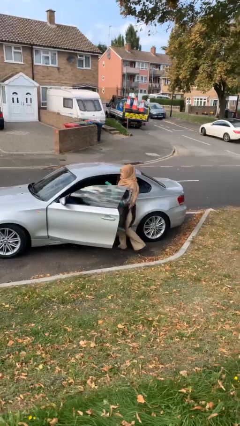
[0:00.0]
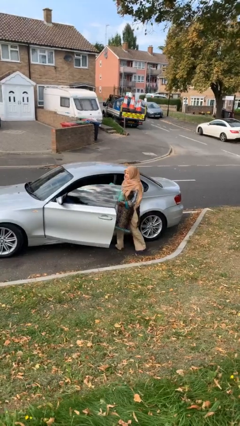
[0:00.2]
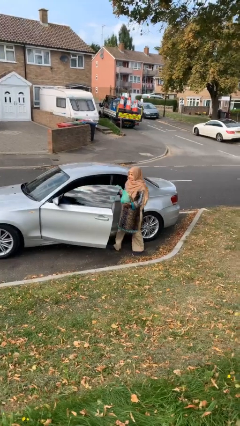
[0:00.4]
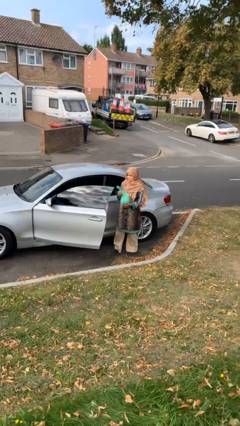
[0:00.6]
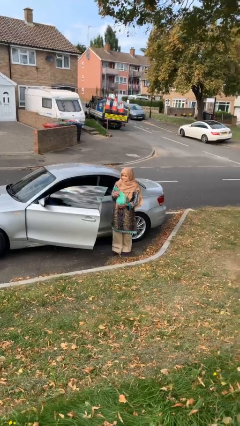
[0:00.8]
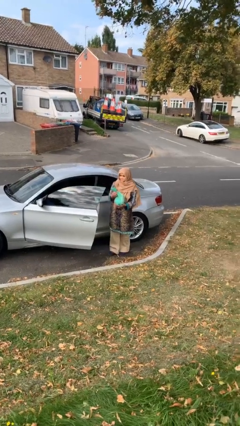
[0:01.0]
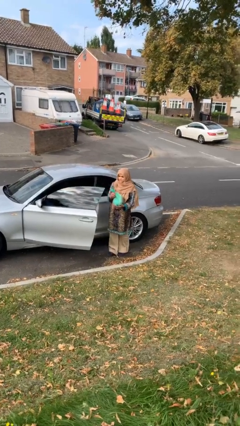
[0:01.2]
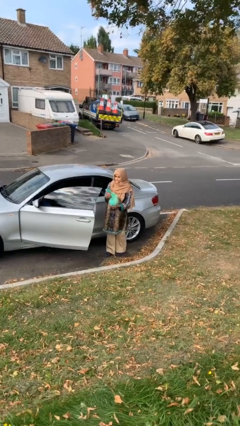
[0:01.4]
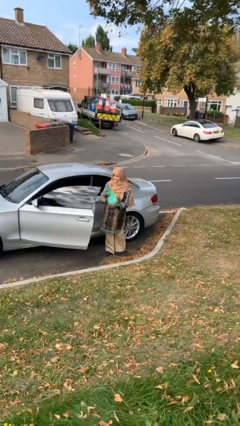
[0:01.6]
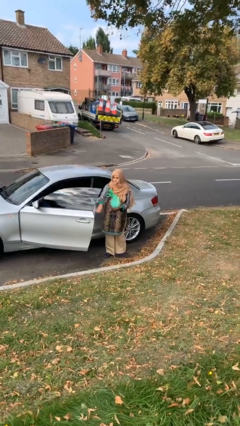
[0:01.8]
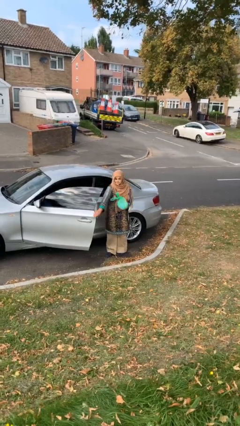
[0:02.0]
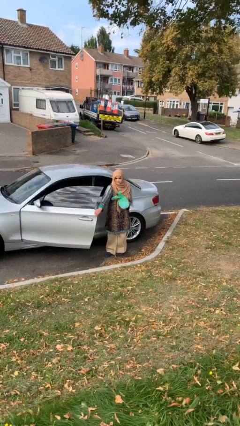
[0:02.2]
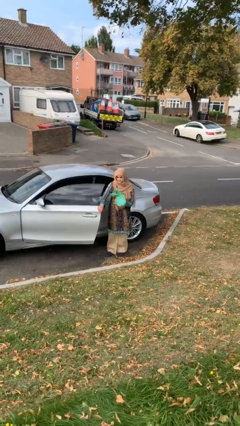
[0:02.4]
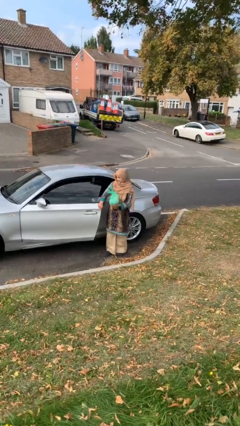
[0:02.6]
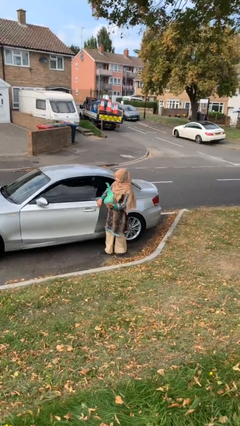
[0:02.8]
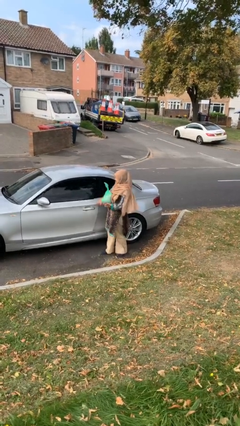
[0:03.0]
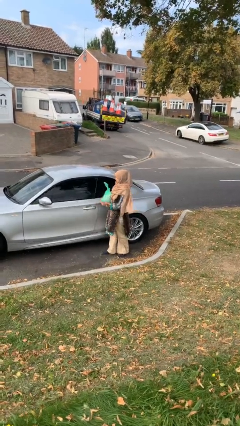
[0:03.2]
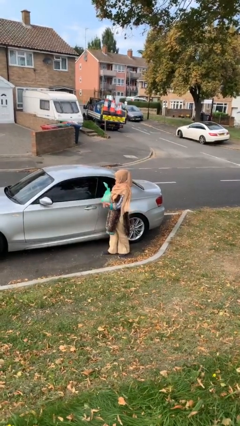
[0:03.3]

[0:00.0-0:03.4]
person closes car door

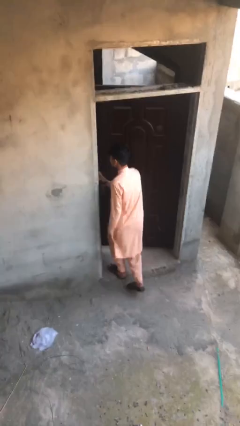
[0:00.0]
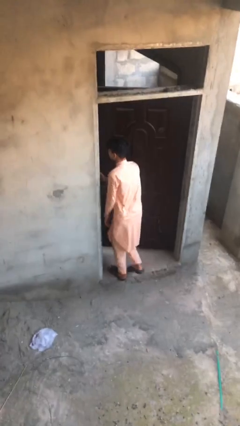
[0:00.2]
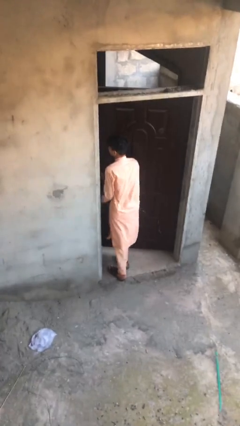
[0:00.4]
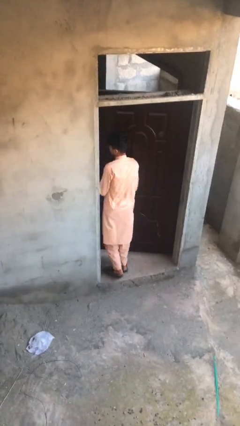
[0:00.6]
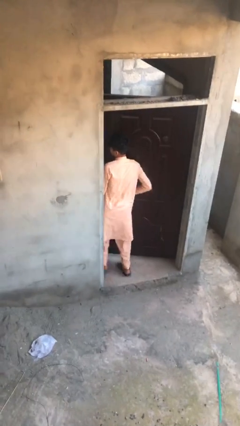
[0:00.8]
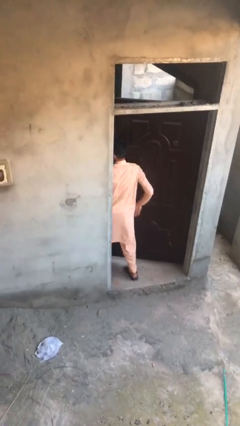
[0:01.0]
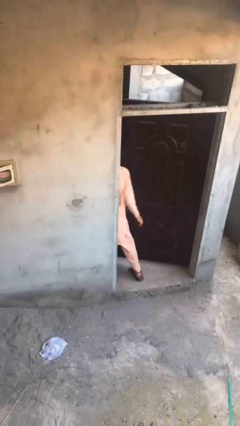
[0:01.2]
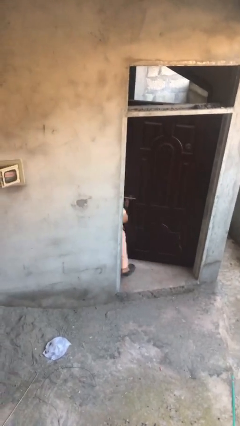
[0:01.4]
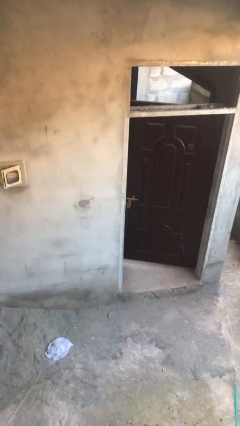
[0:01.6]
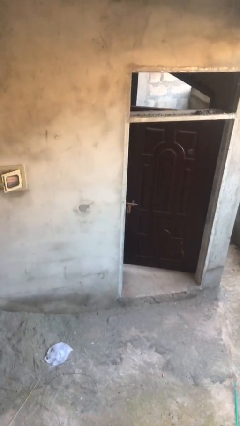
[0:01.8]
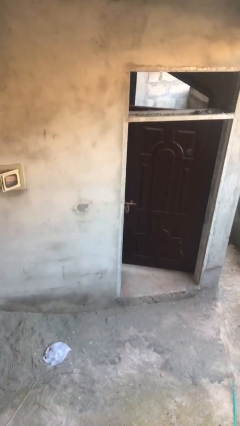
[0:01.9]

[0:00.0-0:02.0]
person exits scene through structure

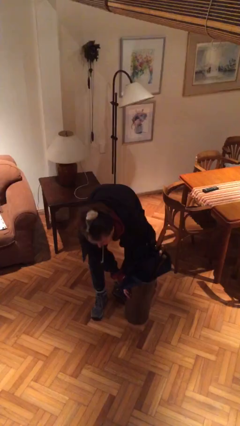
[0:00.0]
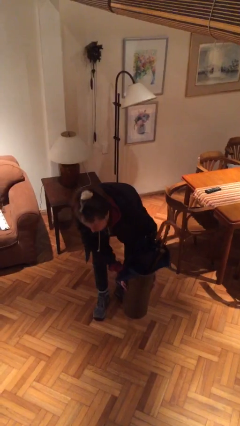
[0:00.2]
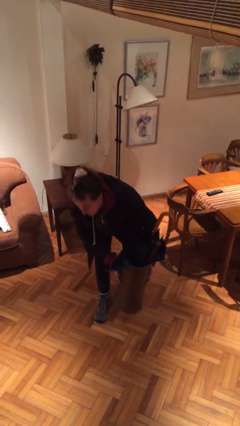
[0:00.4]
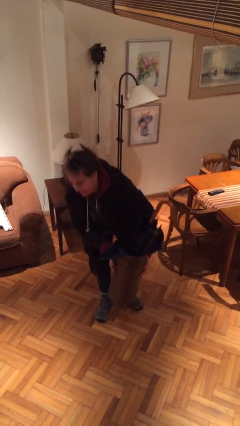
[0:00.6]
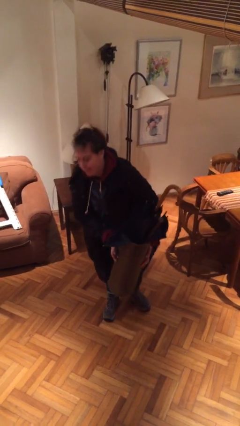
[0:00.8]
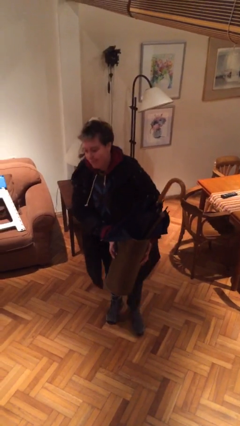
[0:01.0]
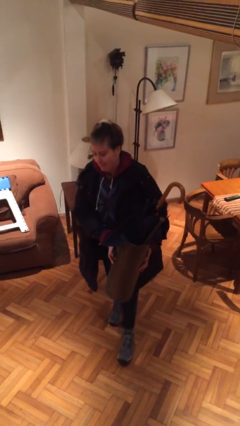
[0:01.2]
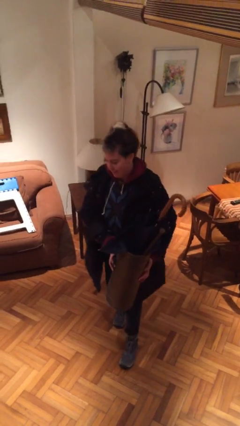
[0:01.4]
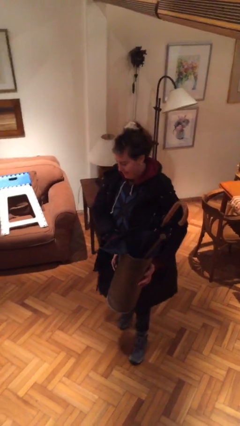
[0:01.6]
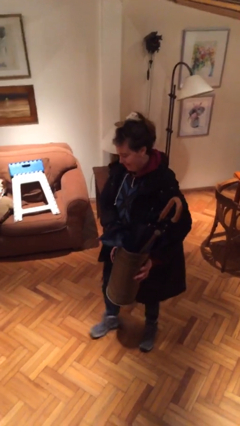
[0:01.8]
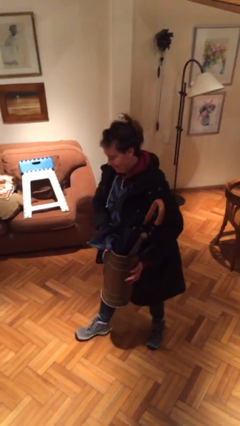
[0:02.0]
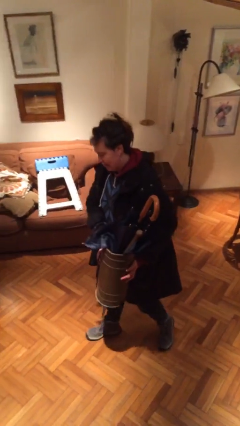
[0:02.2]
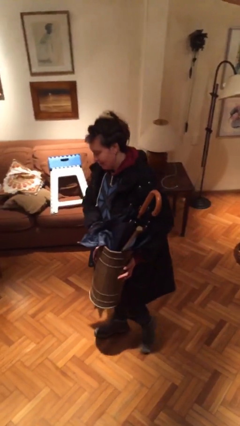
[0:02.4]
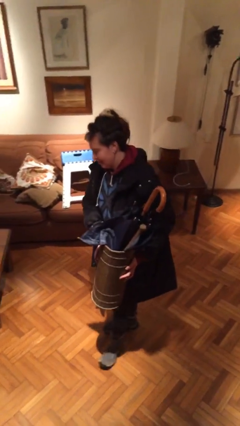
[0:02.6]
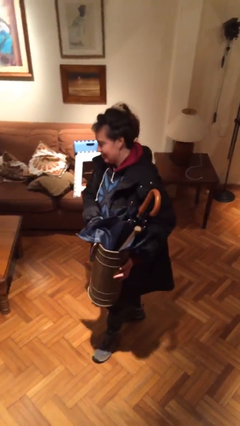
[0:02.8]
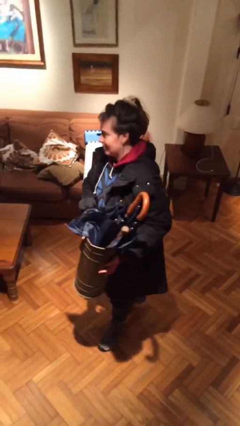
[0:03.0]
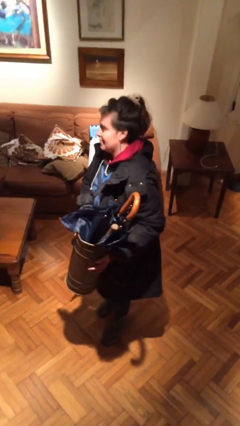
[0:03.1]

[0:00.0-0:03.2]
person carries heavy object

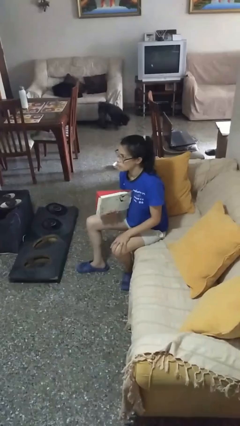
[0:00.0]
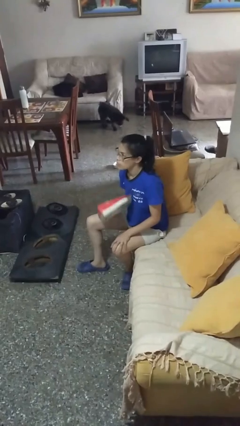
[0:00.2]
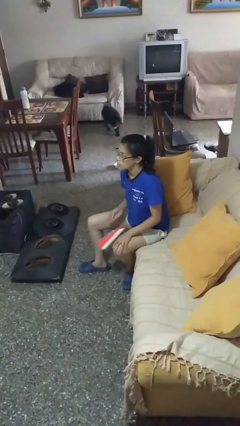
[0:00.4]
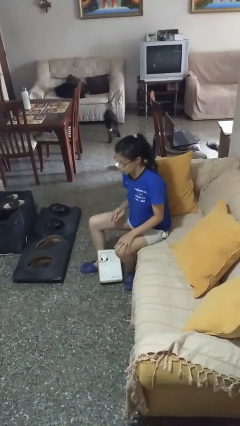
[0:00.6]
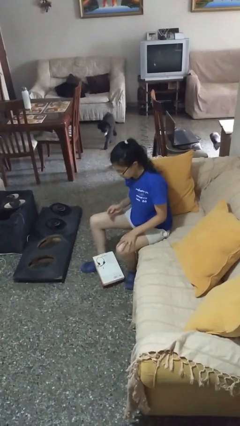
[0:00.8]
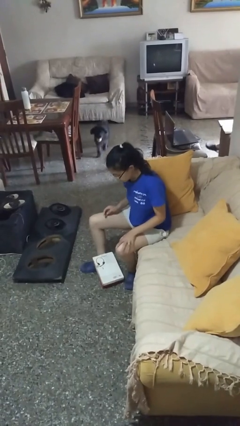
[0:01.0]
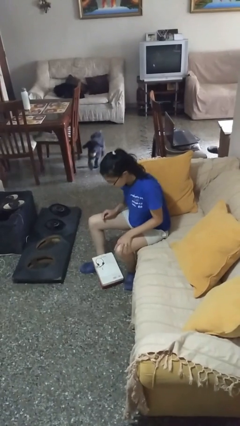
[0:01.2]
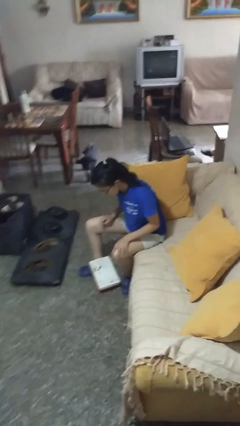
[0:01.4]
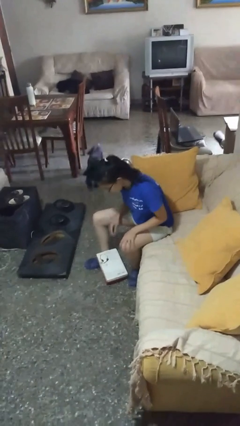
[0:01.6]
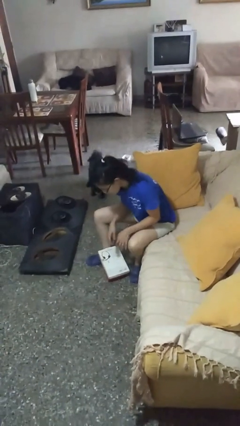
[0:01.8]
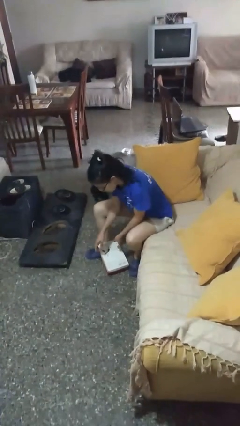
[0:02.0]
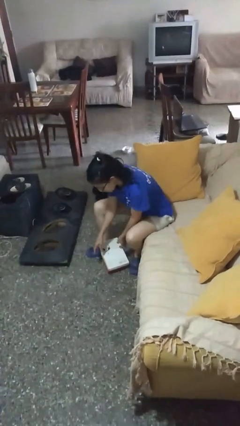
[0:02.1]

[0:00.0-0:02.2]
person drops object

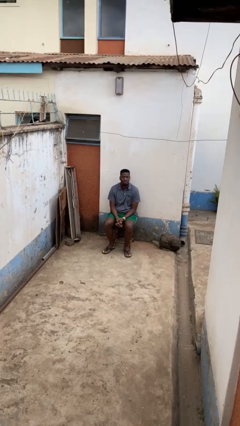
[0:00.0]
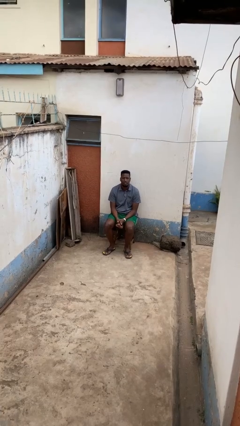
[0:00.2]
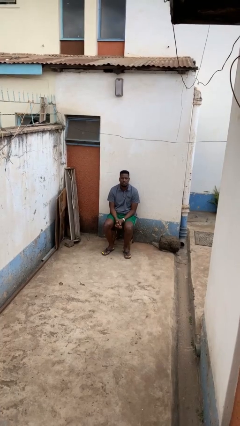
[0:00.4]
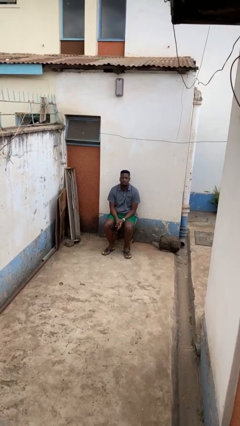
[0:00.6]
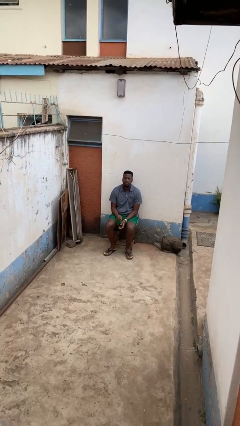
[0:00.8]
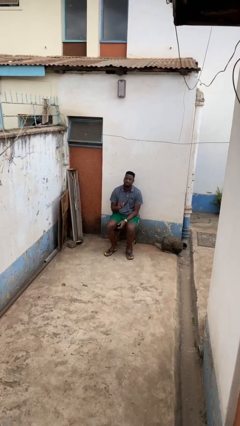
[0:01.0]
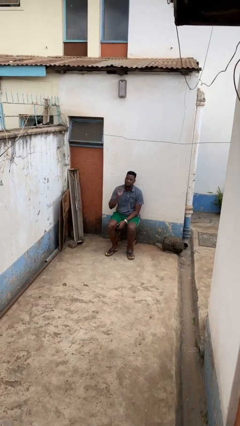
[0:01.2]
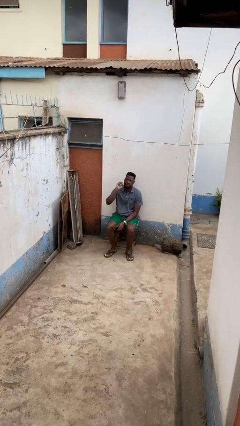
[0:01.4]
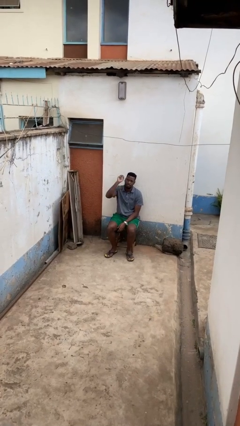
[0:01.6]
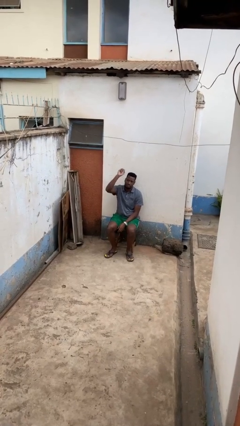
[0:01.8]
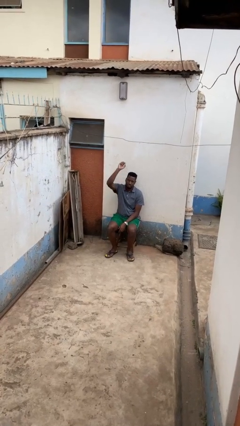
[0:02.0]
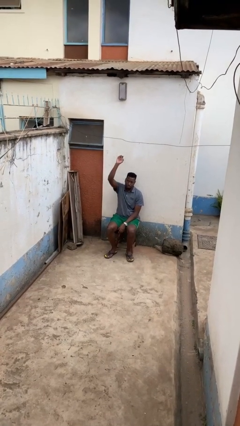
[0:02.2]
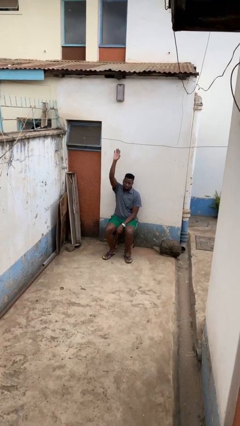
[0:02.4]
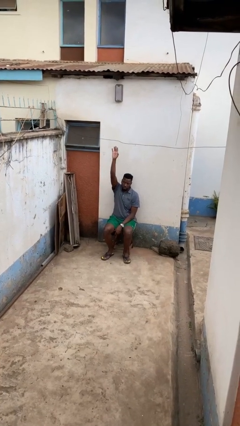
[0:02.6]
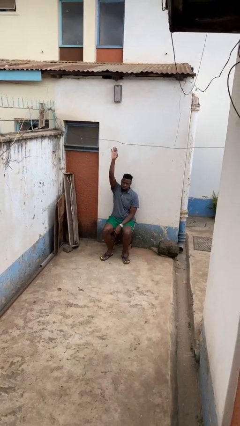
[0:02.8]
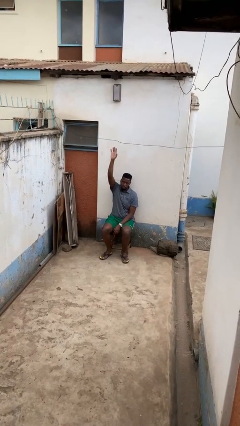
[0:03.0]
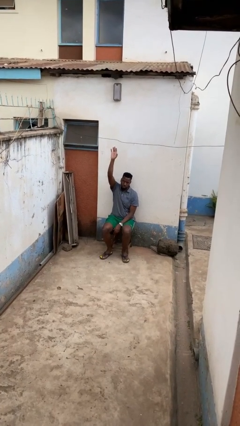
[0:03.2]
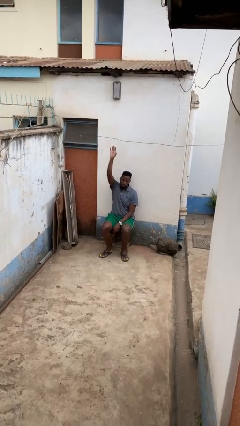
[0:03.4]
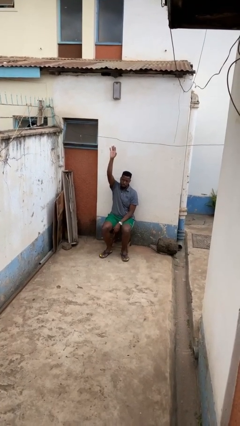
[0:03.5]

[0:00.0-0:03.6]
person gestures raise hand

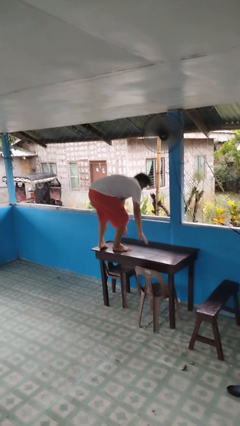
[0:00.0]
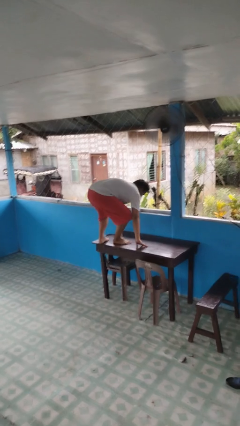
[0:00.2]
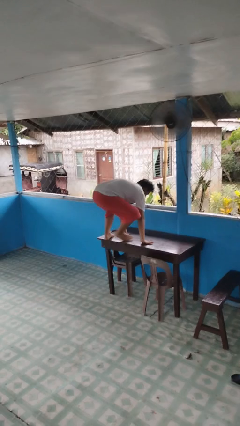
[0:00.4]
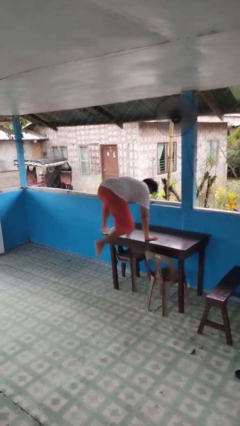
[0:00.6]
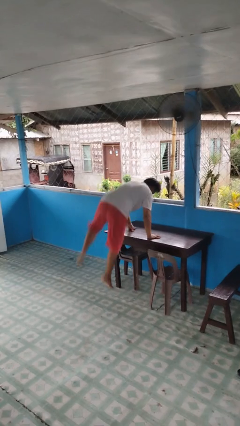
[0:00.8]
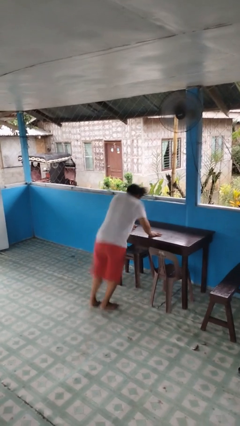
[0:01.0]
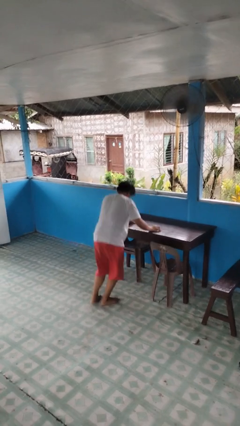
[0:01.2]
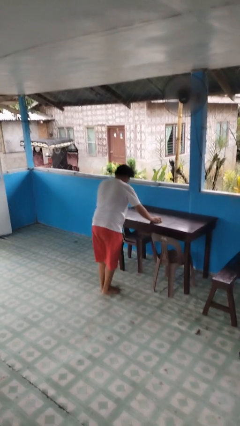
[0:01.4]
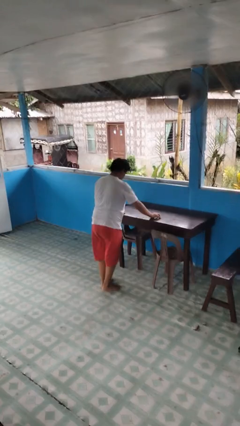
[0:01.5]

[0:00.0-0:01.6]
person climbs off table

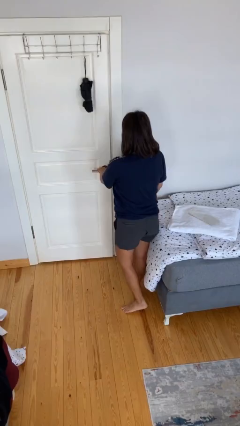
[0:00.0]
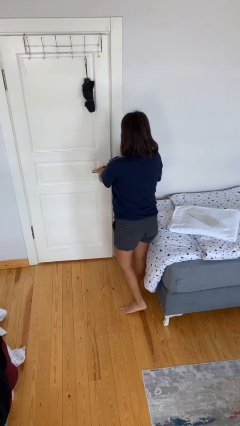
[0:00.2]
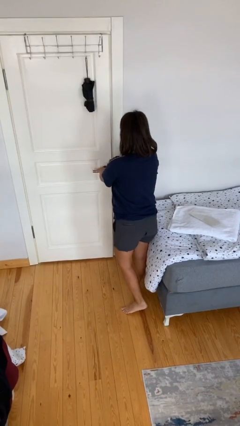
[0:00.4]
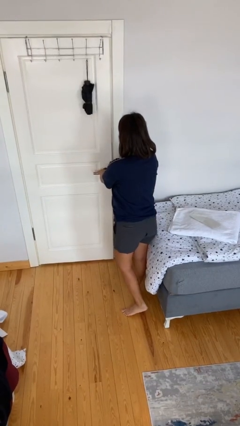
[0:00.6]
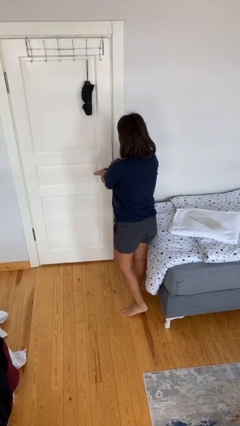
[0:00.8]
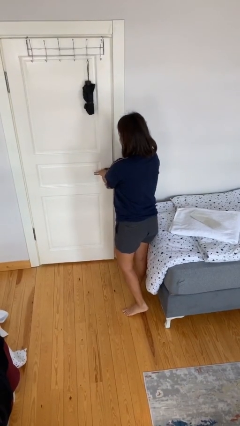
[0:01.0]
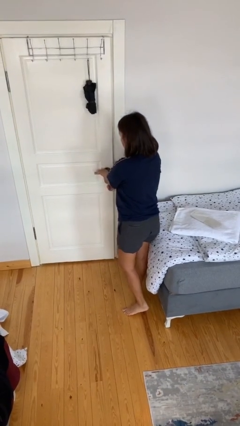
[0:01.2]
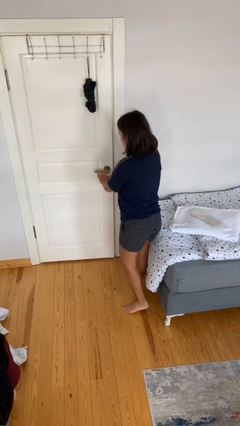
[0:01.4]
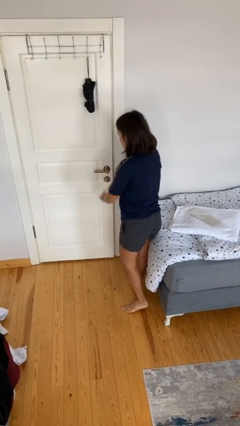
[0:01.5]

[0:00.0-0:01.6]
person locks door with keys
